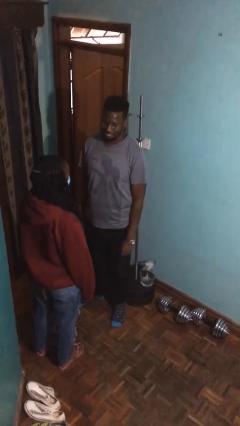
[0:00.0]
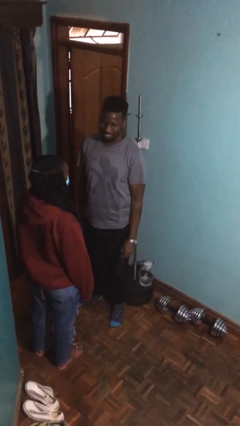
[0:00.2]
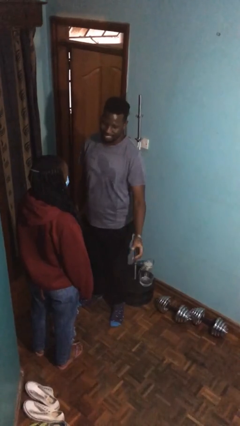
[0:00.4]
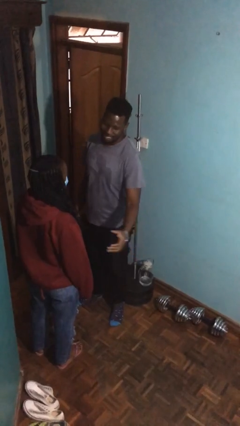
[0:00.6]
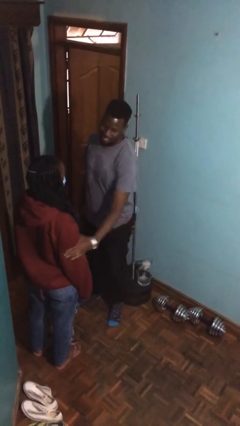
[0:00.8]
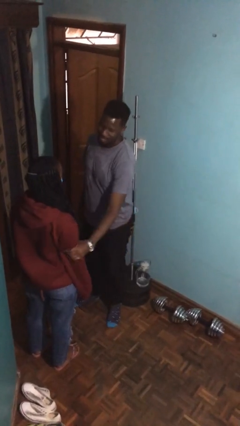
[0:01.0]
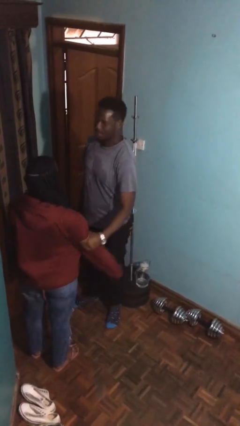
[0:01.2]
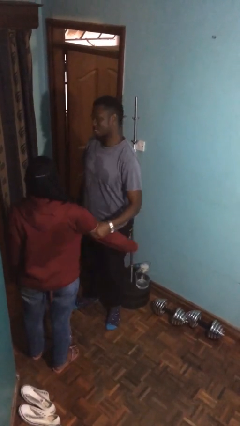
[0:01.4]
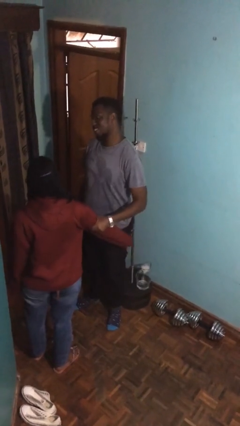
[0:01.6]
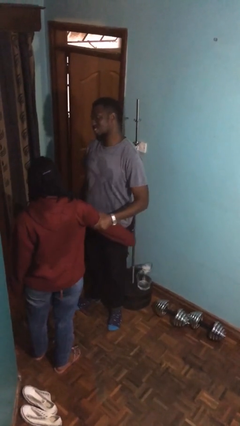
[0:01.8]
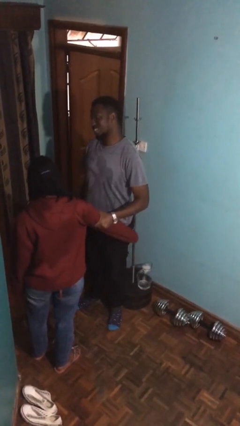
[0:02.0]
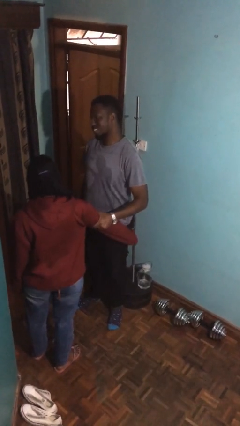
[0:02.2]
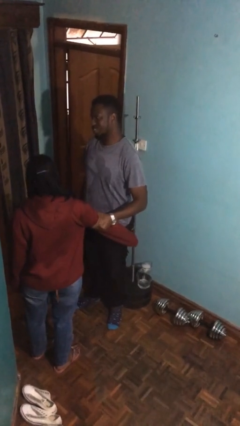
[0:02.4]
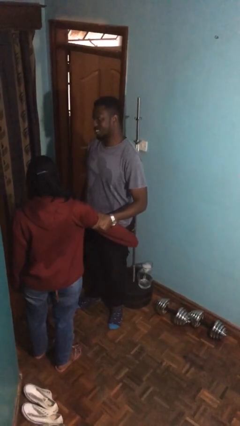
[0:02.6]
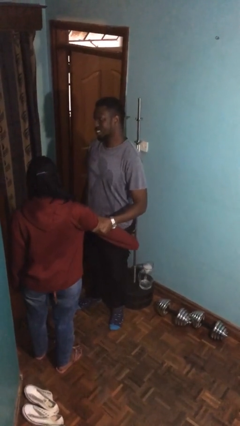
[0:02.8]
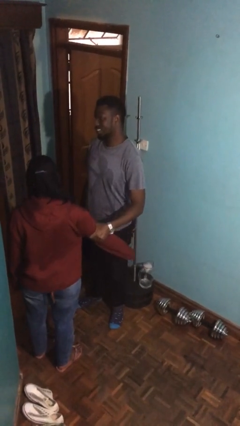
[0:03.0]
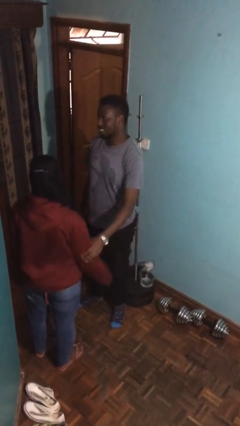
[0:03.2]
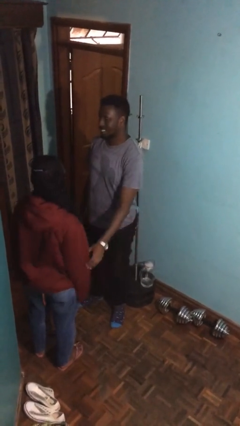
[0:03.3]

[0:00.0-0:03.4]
person grabs person by bicep

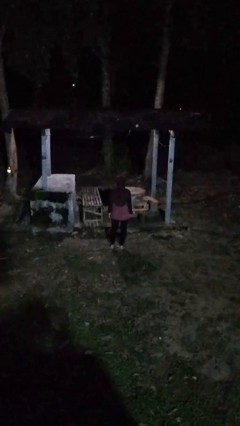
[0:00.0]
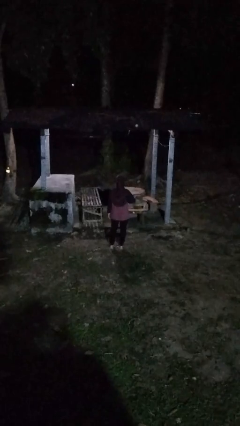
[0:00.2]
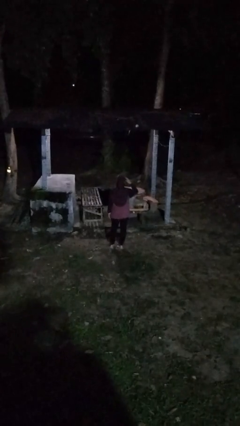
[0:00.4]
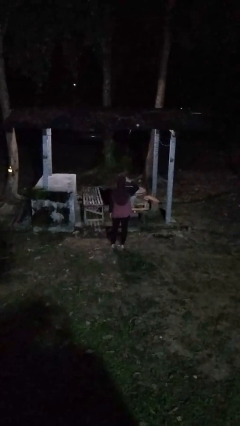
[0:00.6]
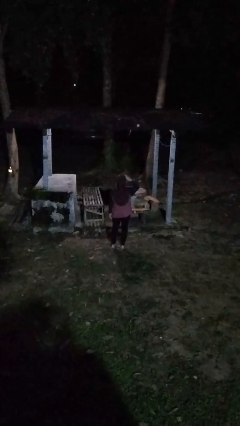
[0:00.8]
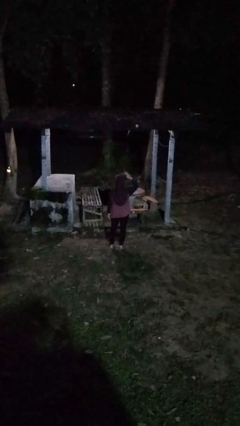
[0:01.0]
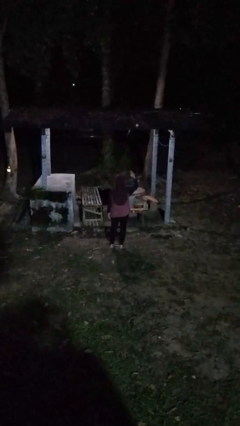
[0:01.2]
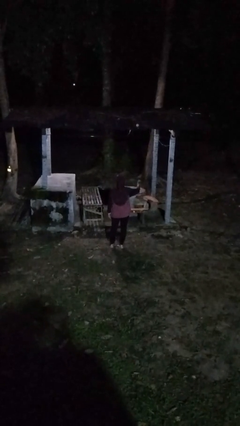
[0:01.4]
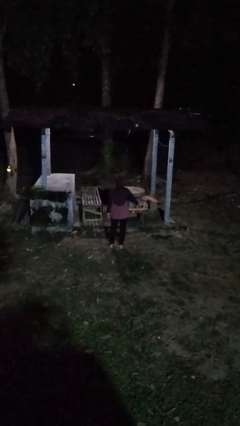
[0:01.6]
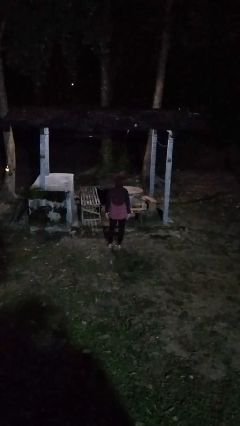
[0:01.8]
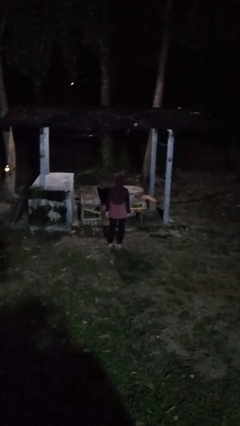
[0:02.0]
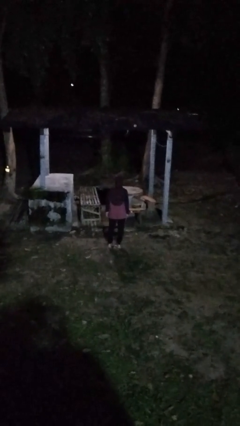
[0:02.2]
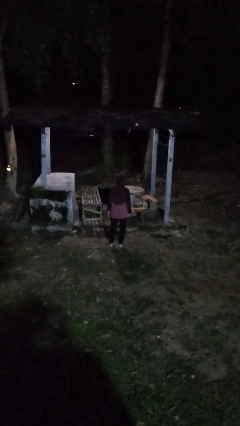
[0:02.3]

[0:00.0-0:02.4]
person salutes

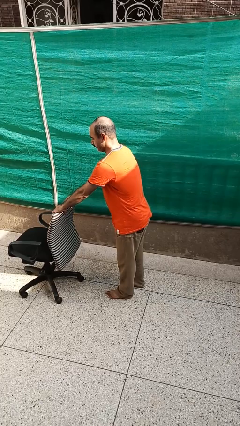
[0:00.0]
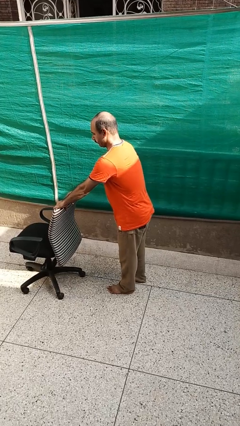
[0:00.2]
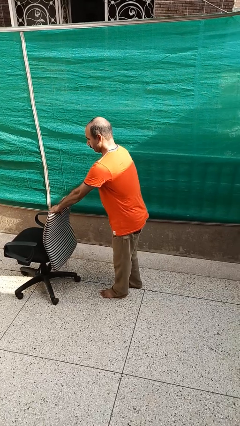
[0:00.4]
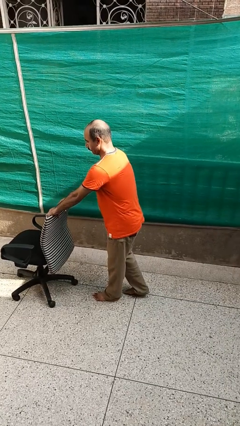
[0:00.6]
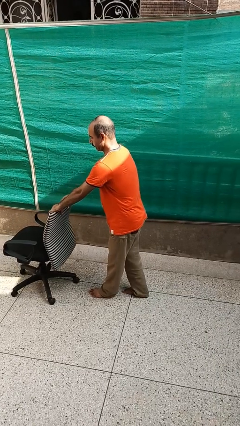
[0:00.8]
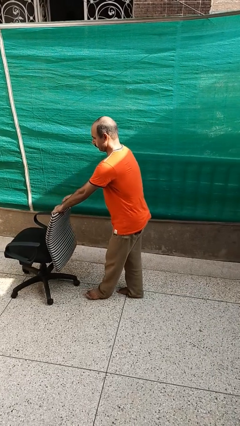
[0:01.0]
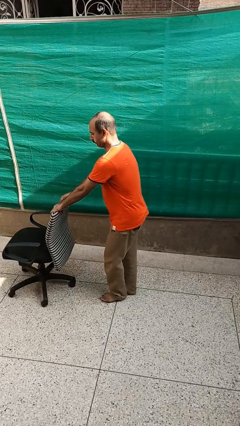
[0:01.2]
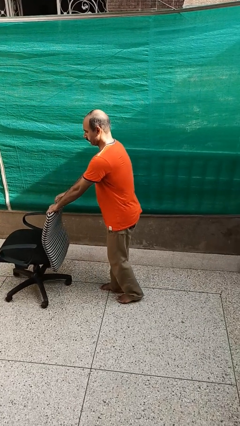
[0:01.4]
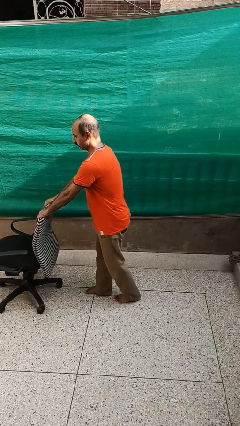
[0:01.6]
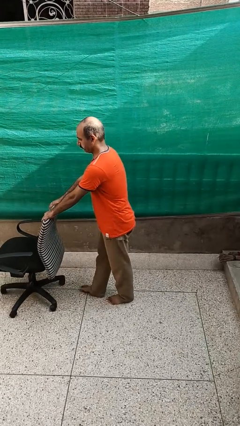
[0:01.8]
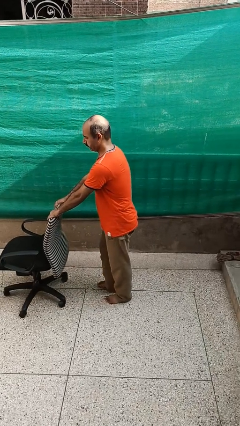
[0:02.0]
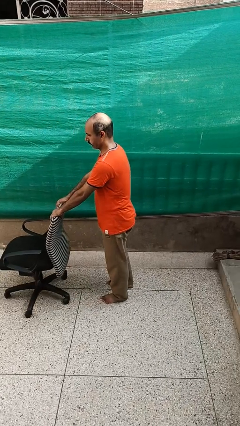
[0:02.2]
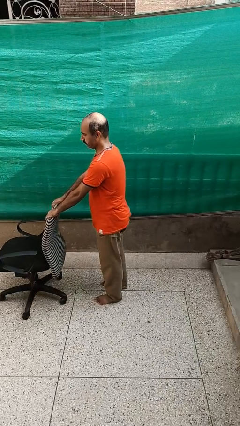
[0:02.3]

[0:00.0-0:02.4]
person pulls wheeled cart

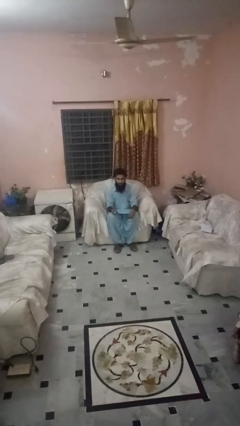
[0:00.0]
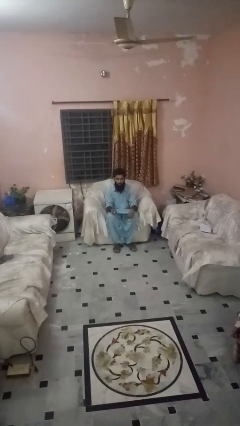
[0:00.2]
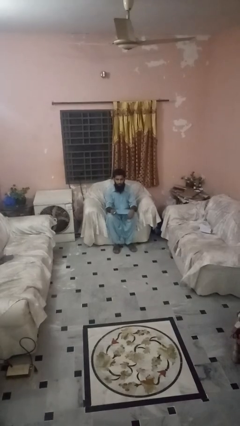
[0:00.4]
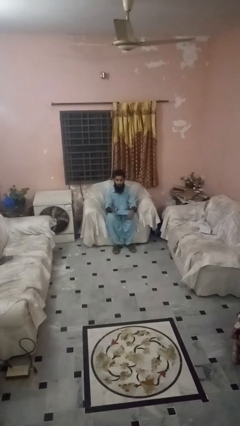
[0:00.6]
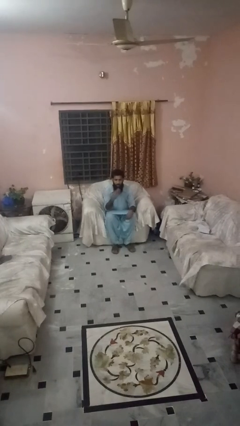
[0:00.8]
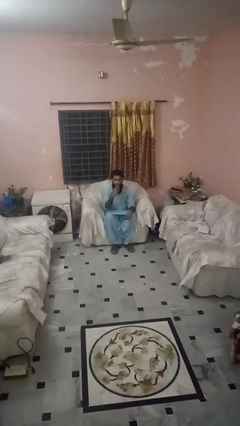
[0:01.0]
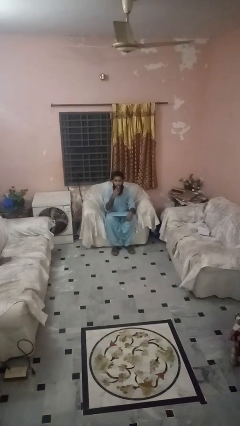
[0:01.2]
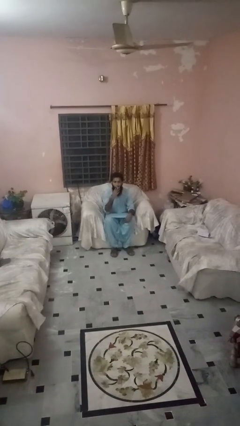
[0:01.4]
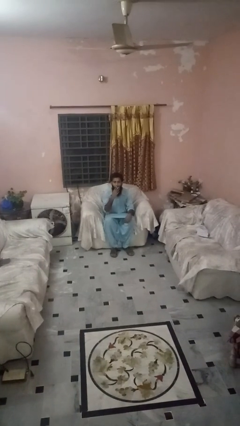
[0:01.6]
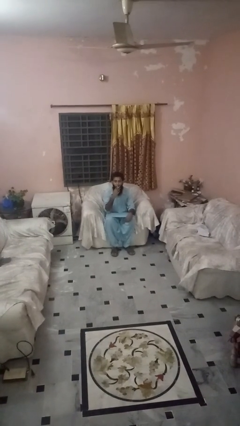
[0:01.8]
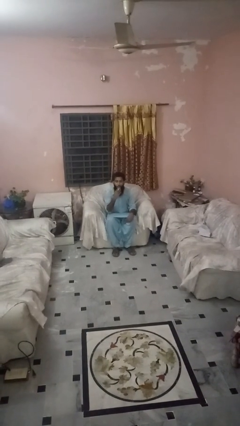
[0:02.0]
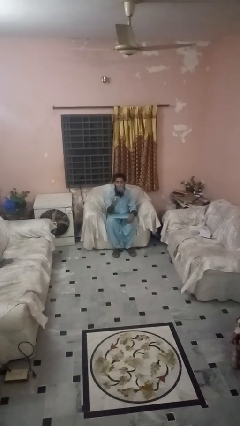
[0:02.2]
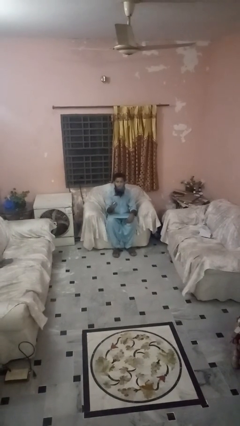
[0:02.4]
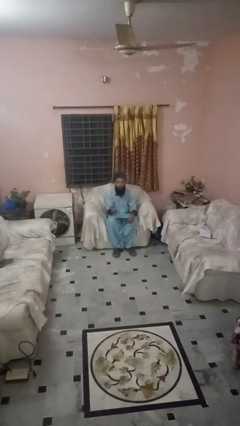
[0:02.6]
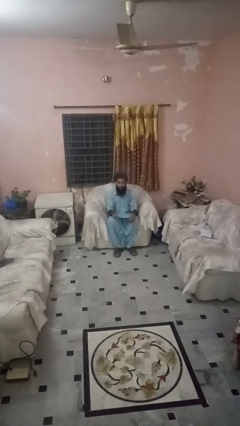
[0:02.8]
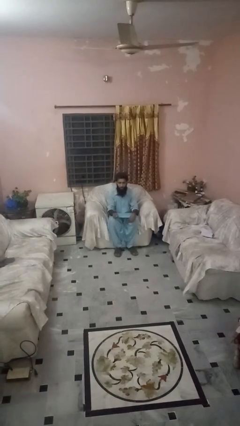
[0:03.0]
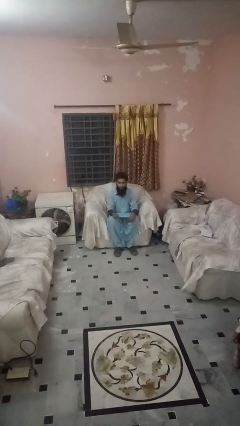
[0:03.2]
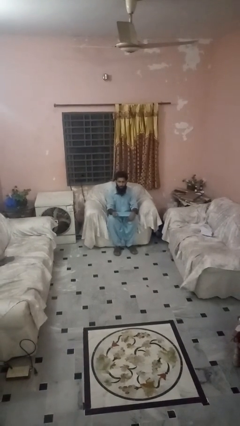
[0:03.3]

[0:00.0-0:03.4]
person vapes

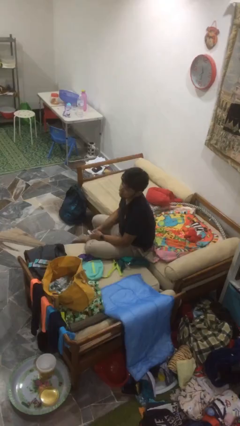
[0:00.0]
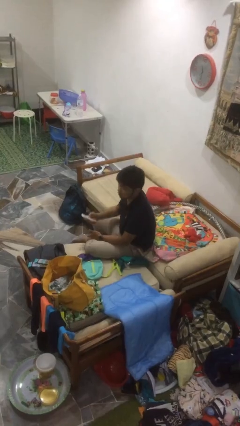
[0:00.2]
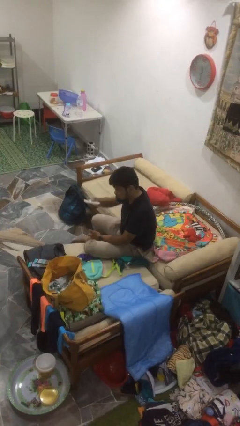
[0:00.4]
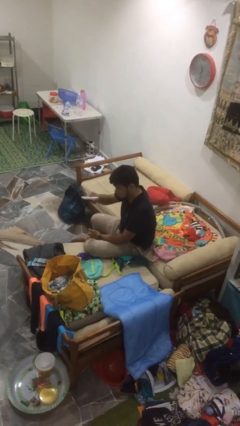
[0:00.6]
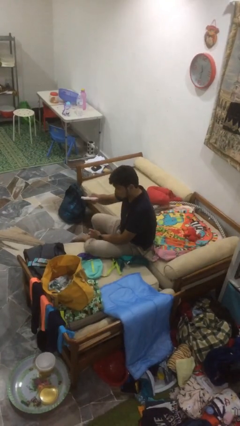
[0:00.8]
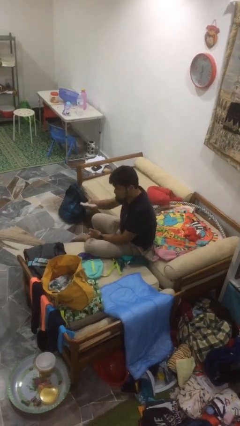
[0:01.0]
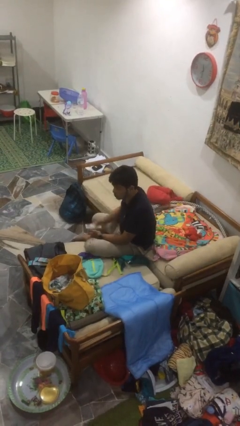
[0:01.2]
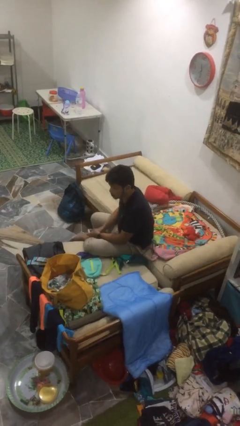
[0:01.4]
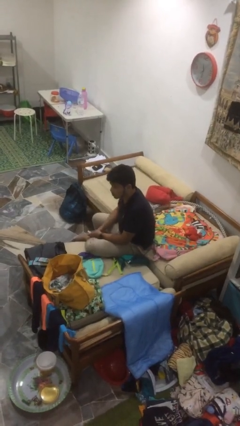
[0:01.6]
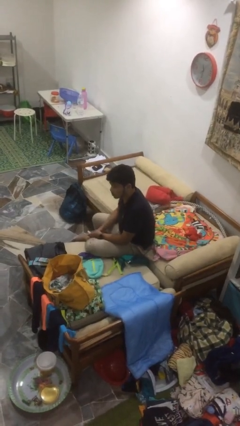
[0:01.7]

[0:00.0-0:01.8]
person uses television remote

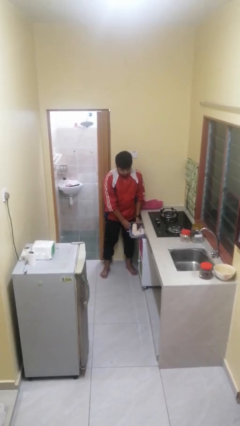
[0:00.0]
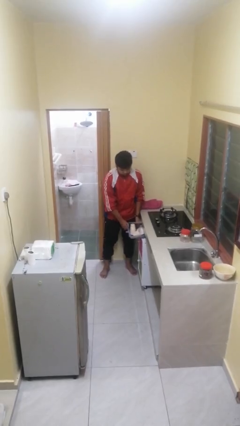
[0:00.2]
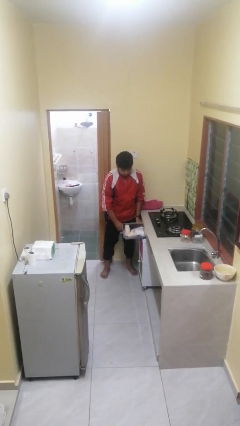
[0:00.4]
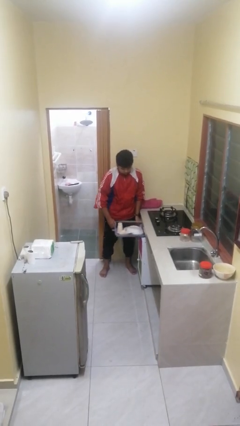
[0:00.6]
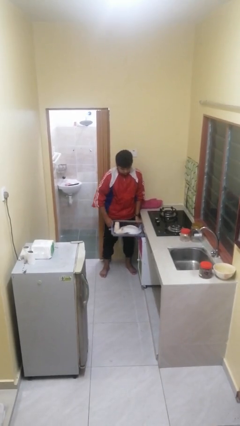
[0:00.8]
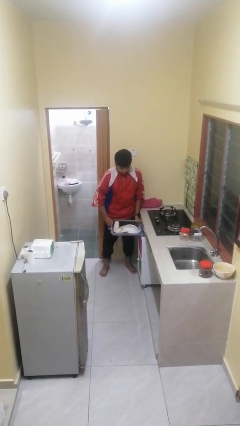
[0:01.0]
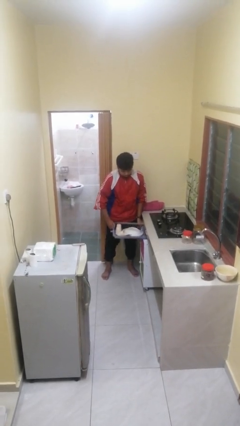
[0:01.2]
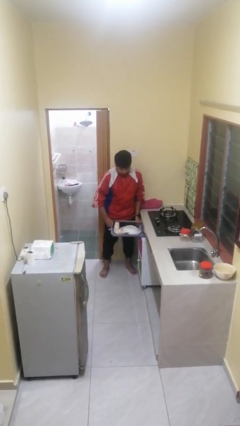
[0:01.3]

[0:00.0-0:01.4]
person opens kitchen drawer

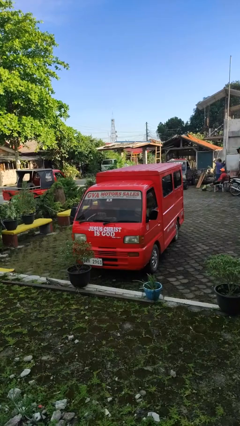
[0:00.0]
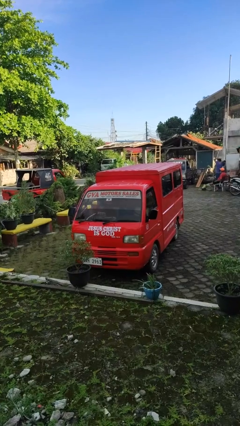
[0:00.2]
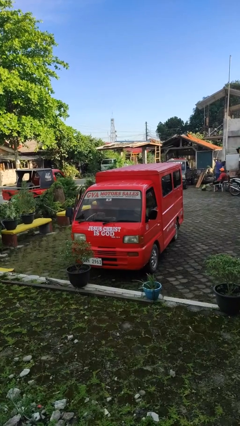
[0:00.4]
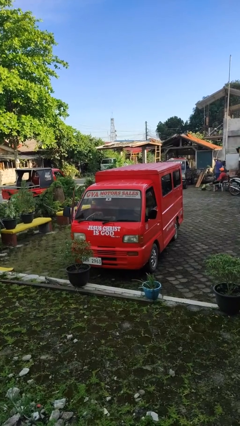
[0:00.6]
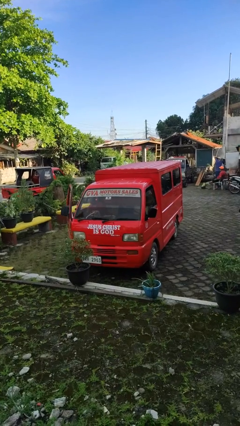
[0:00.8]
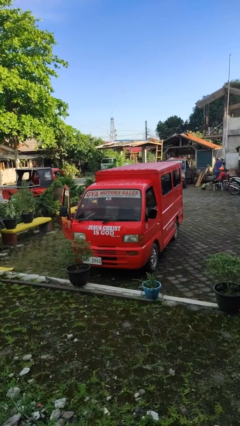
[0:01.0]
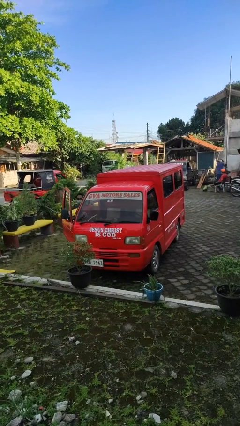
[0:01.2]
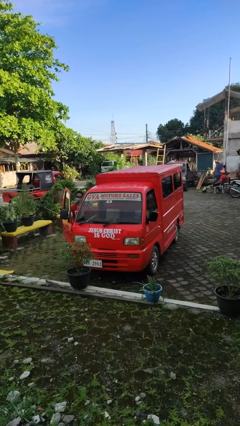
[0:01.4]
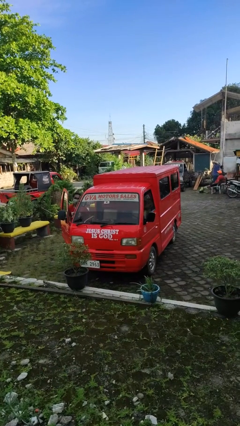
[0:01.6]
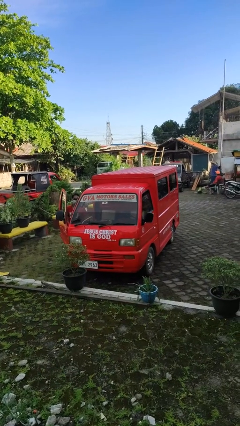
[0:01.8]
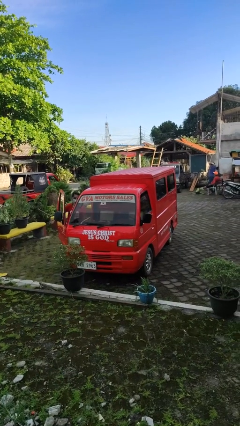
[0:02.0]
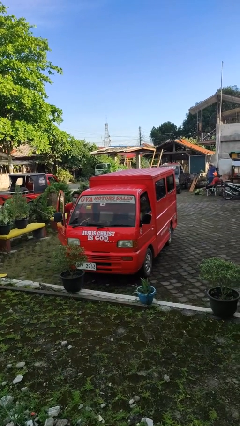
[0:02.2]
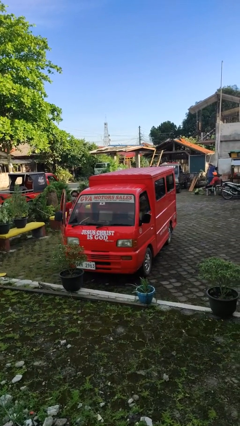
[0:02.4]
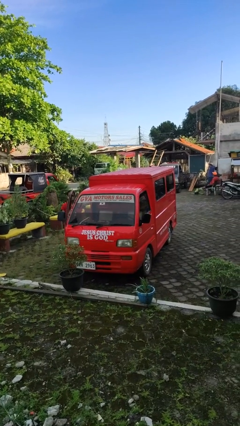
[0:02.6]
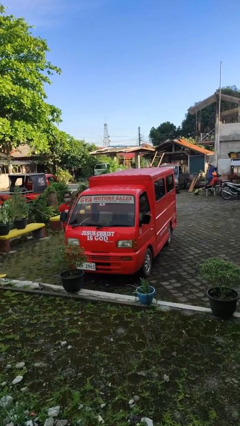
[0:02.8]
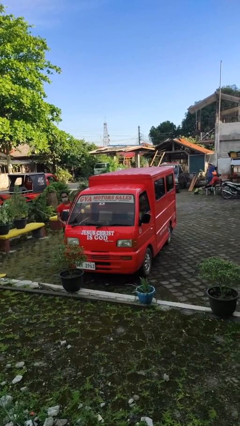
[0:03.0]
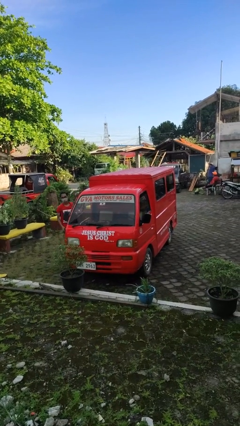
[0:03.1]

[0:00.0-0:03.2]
car drops off person
